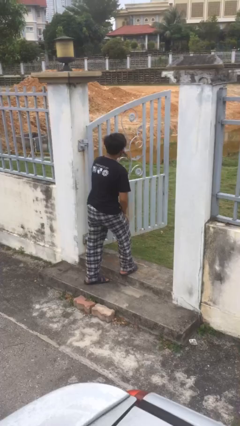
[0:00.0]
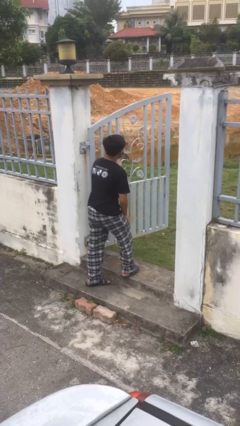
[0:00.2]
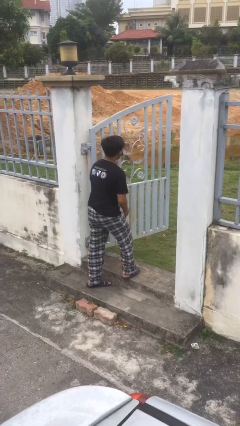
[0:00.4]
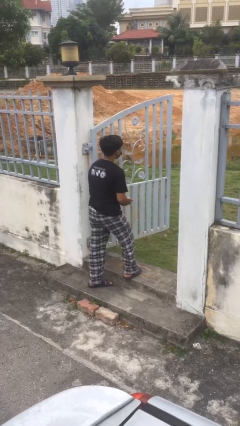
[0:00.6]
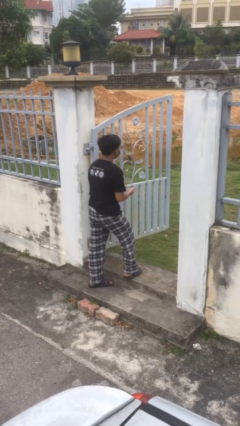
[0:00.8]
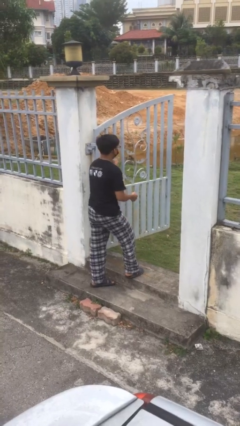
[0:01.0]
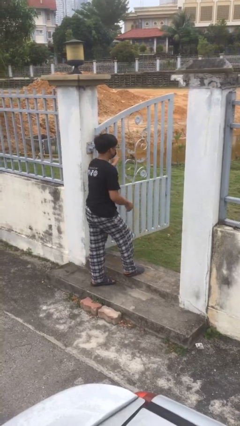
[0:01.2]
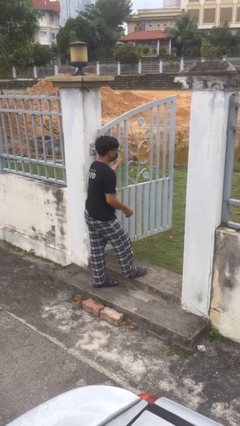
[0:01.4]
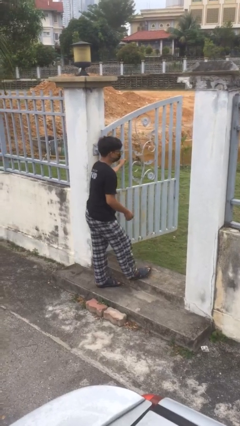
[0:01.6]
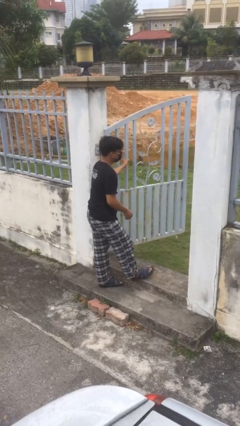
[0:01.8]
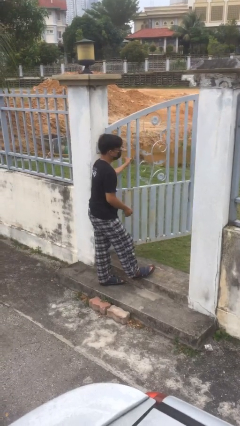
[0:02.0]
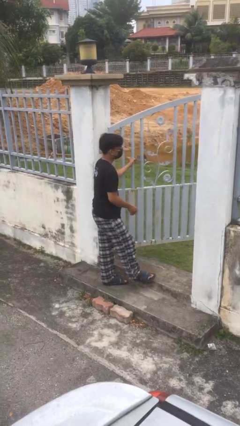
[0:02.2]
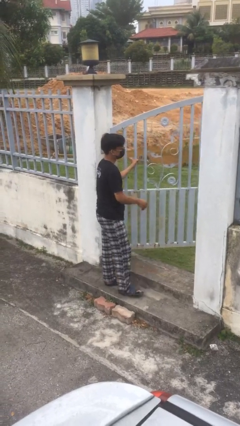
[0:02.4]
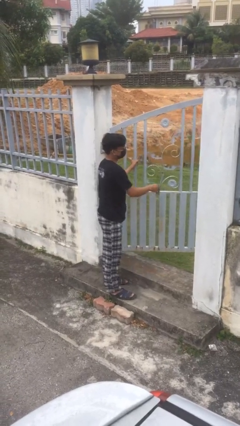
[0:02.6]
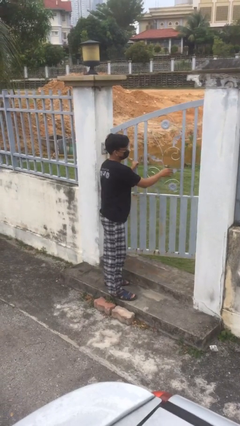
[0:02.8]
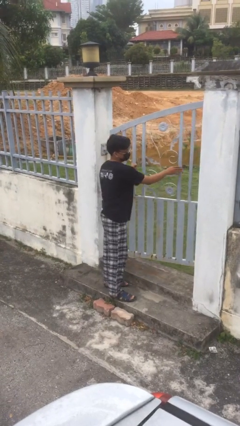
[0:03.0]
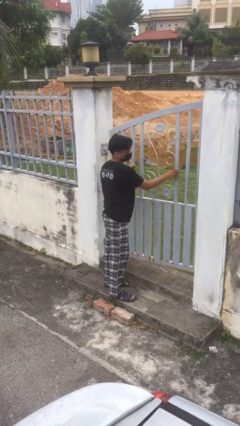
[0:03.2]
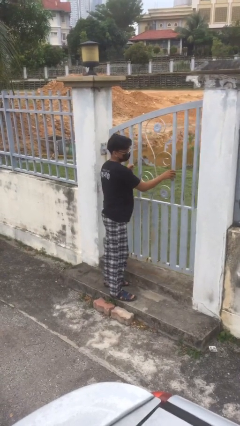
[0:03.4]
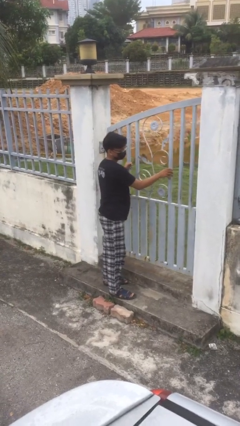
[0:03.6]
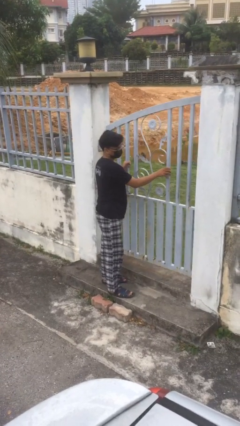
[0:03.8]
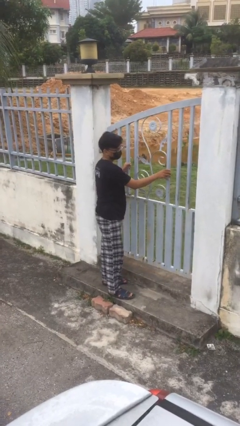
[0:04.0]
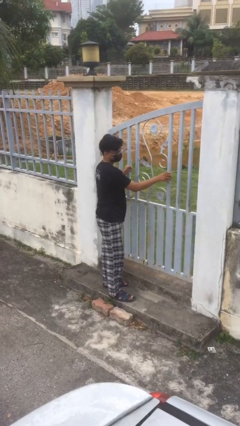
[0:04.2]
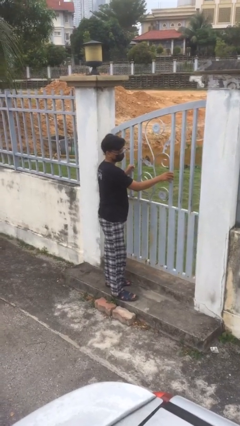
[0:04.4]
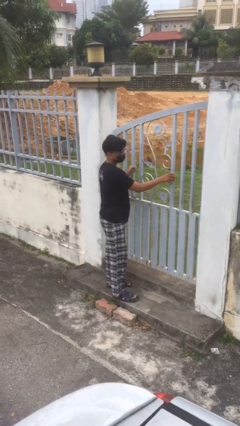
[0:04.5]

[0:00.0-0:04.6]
person closes facility door

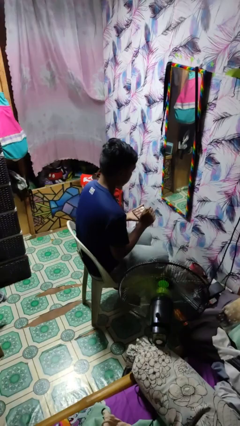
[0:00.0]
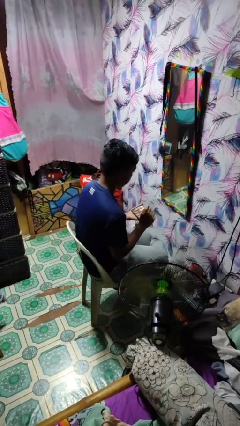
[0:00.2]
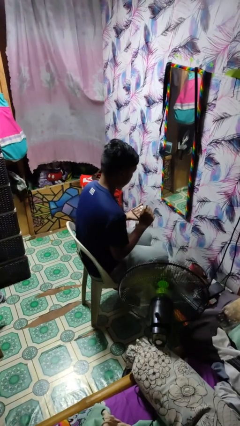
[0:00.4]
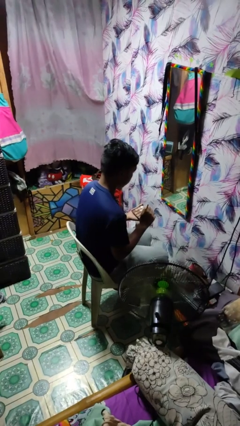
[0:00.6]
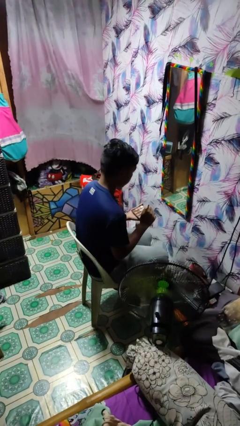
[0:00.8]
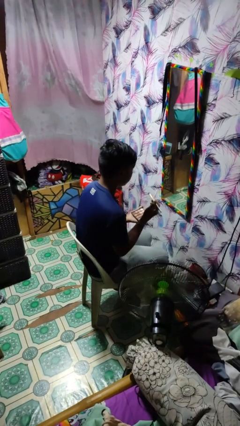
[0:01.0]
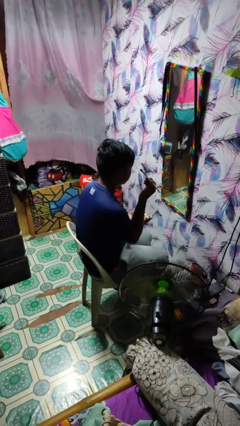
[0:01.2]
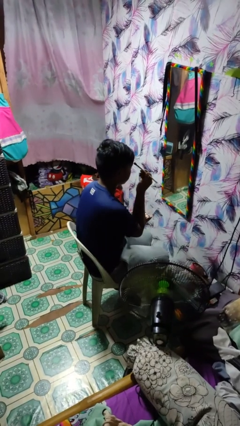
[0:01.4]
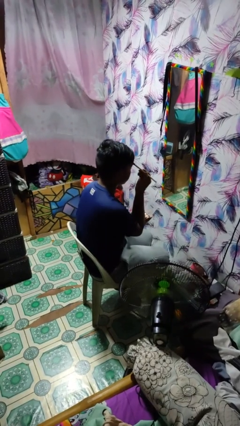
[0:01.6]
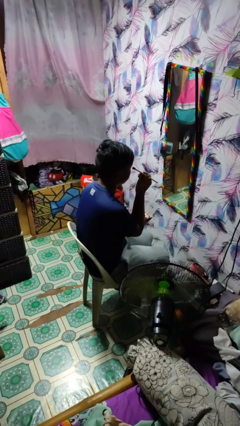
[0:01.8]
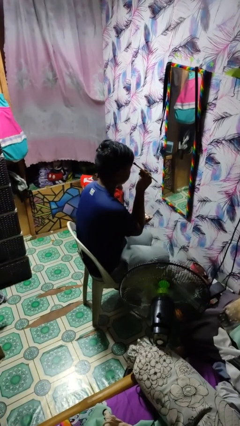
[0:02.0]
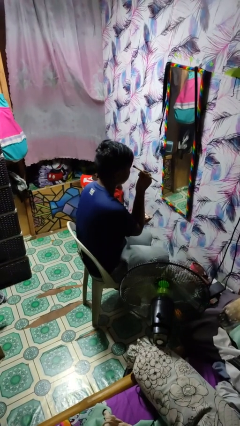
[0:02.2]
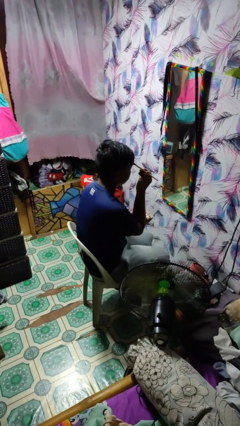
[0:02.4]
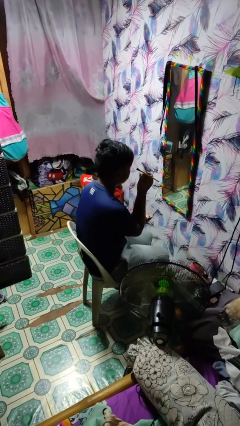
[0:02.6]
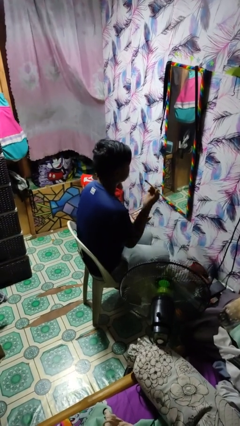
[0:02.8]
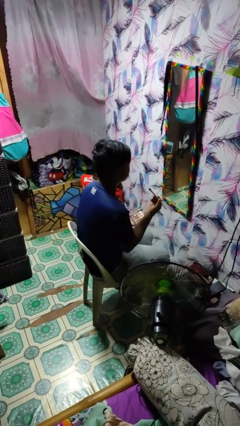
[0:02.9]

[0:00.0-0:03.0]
person applies eye makeup

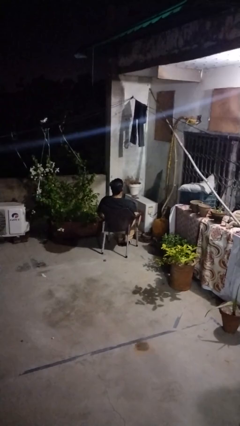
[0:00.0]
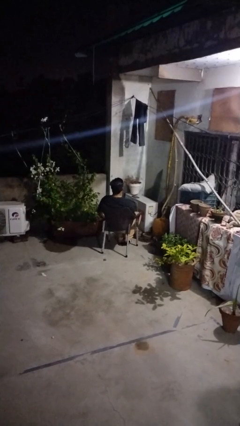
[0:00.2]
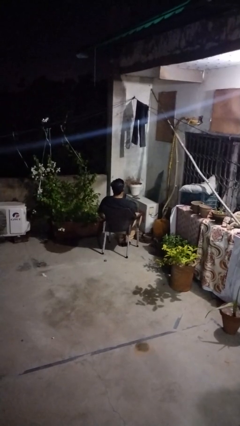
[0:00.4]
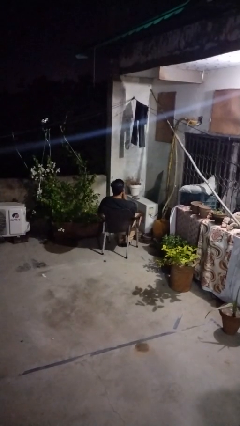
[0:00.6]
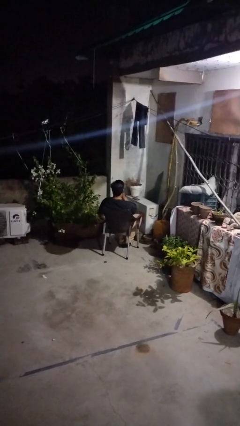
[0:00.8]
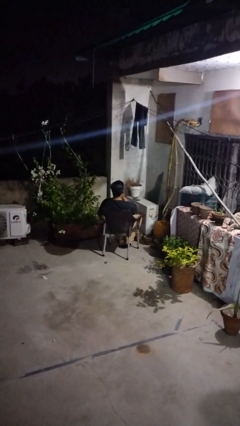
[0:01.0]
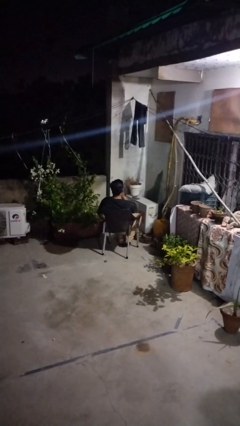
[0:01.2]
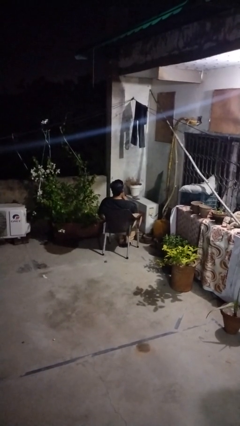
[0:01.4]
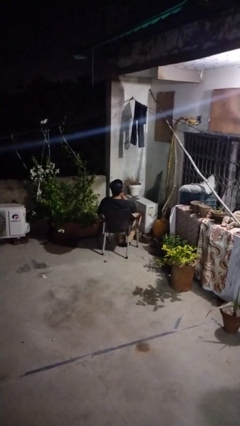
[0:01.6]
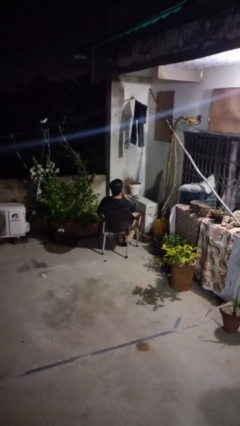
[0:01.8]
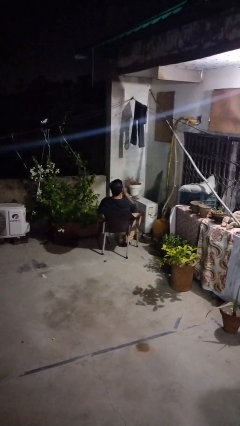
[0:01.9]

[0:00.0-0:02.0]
person gestures be quiet

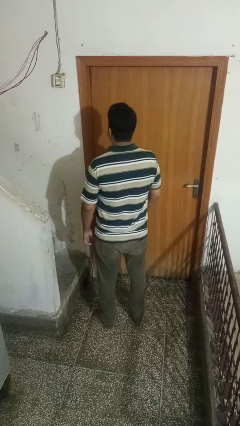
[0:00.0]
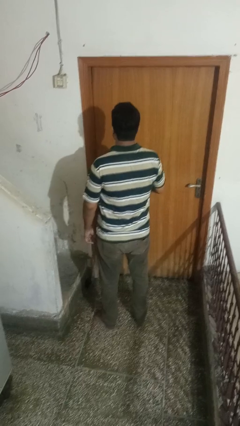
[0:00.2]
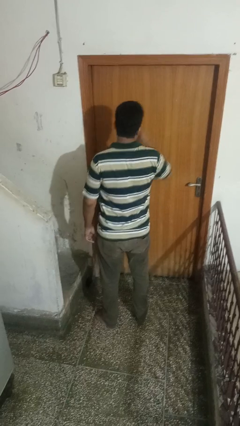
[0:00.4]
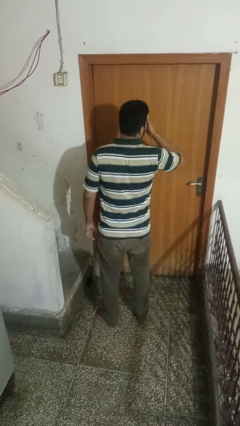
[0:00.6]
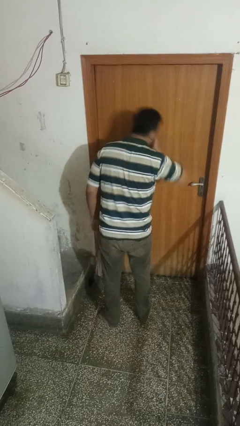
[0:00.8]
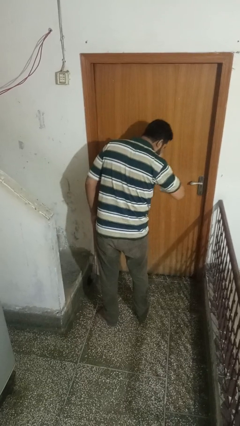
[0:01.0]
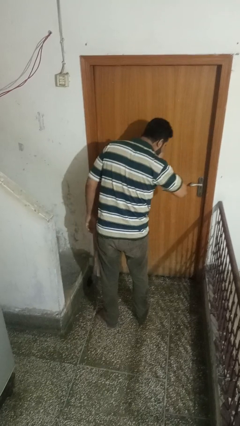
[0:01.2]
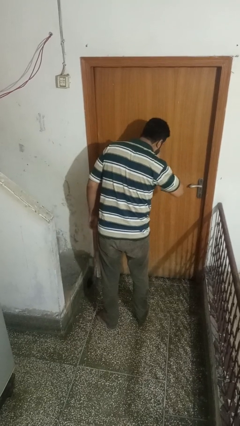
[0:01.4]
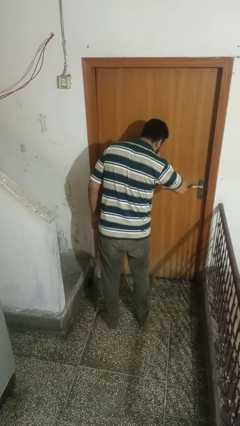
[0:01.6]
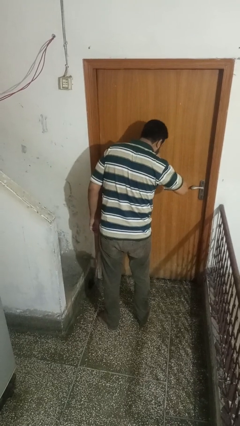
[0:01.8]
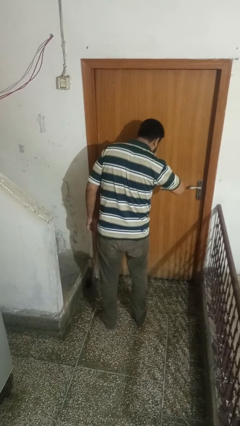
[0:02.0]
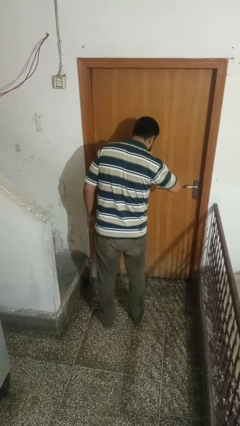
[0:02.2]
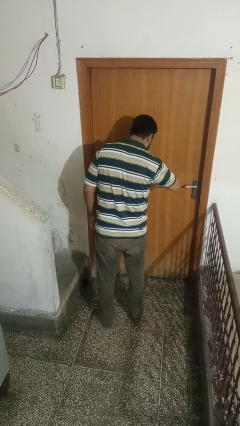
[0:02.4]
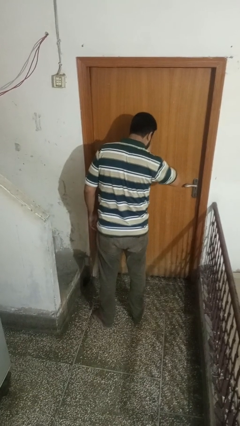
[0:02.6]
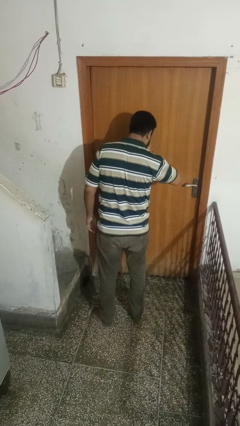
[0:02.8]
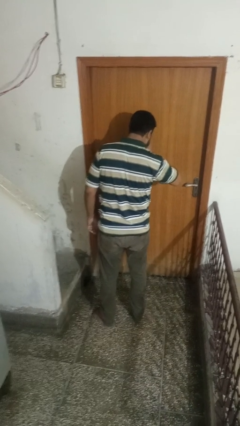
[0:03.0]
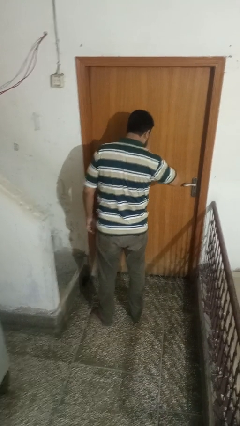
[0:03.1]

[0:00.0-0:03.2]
person sneezes into hand

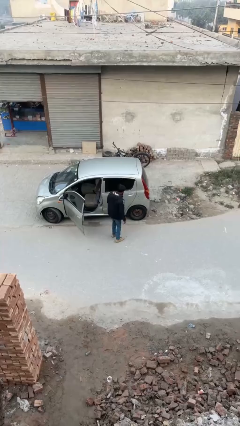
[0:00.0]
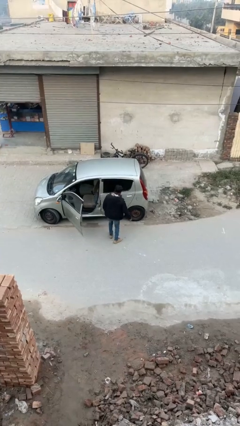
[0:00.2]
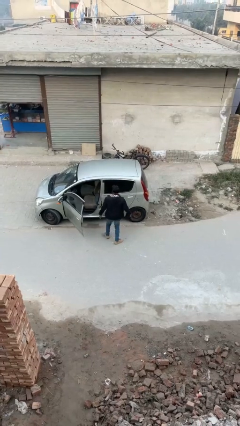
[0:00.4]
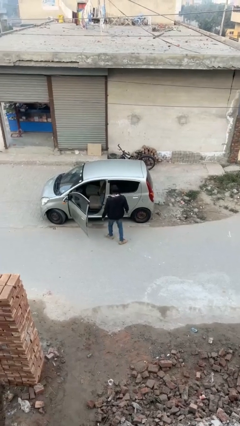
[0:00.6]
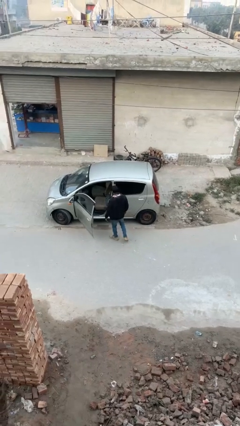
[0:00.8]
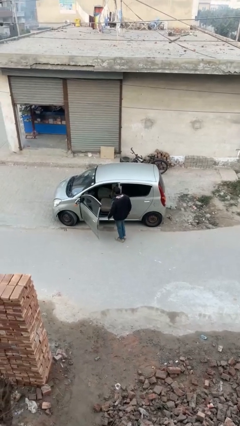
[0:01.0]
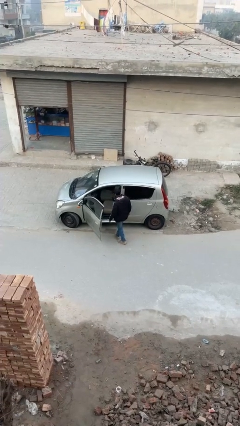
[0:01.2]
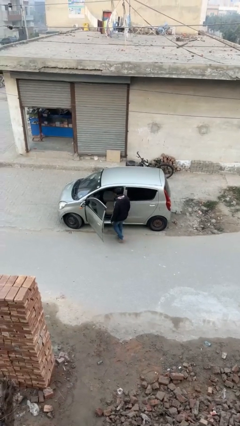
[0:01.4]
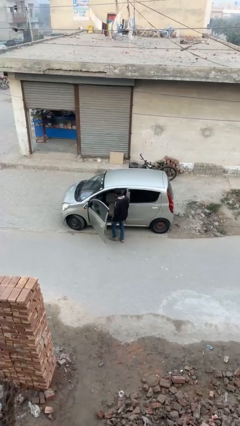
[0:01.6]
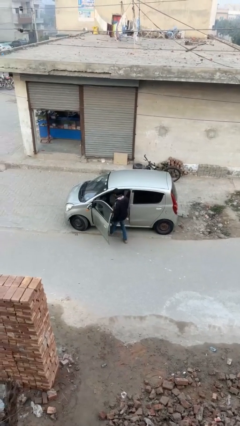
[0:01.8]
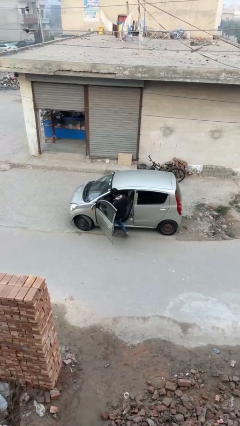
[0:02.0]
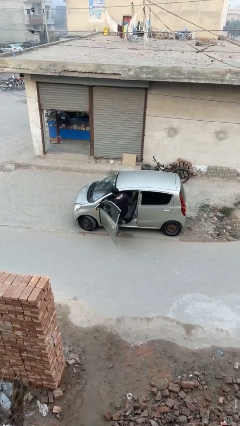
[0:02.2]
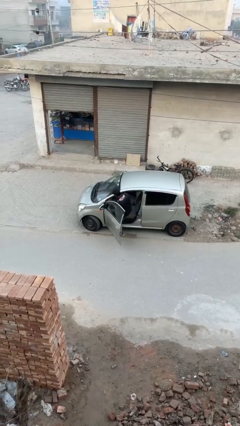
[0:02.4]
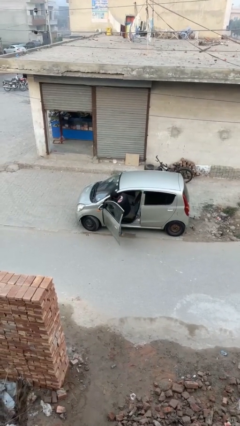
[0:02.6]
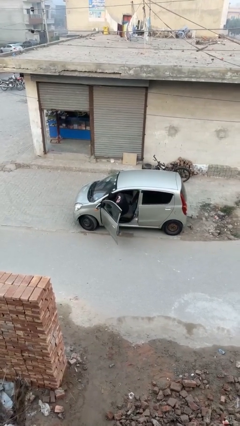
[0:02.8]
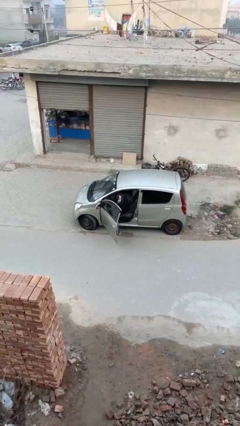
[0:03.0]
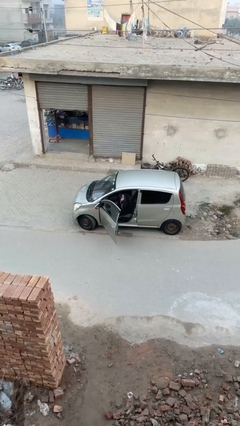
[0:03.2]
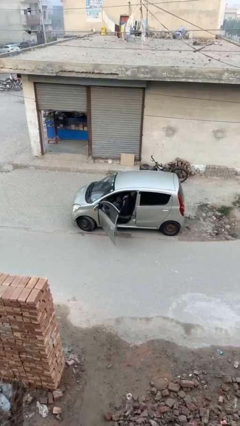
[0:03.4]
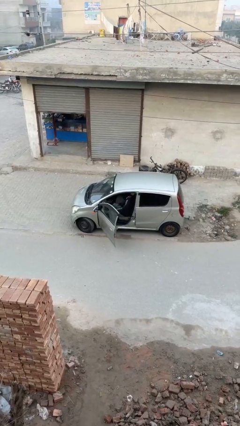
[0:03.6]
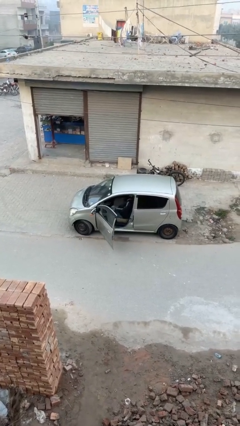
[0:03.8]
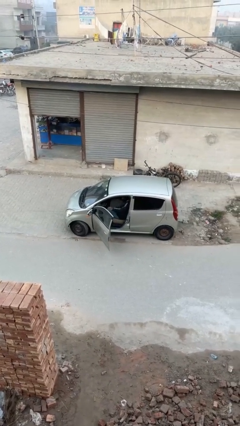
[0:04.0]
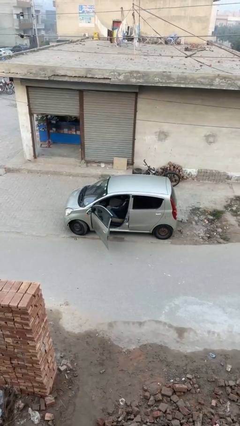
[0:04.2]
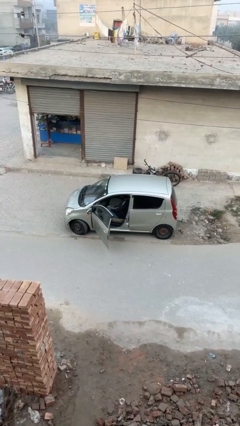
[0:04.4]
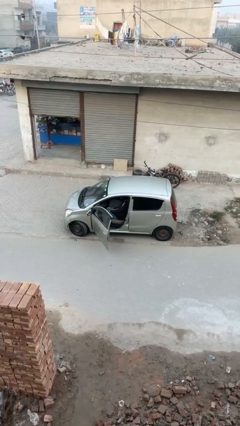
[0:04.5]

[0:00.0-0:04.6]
person enters car

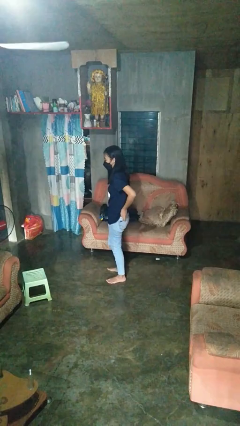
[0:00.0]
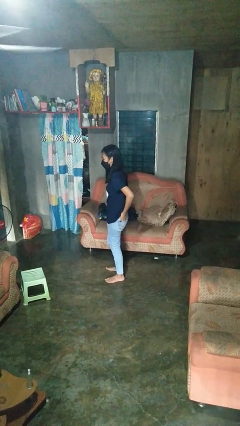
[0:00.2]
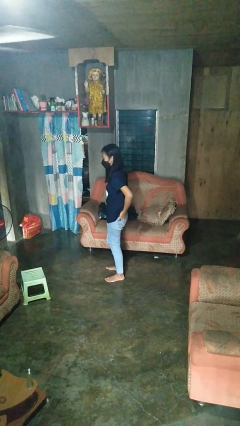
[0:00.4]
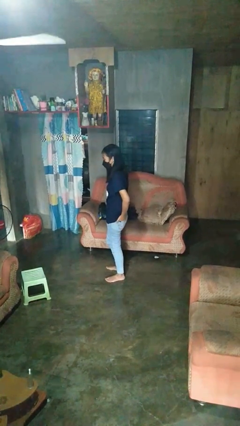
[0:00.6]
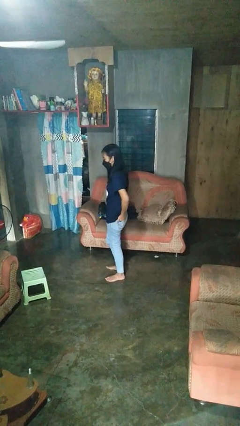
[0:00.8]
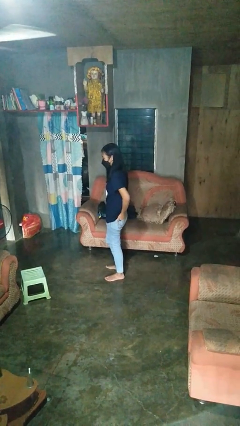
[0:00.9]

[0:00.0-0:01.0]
person puts hands in back pockets
